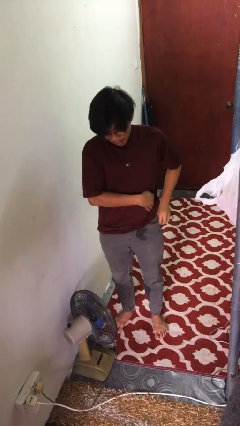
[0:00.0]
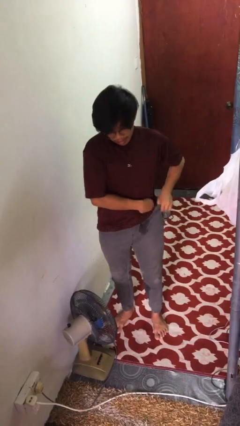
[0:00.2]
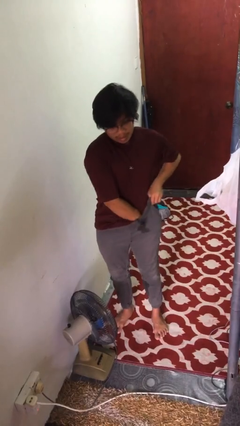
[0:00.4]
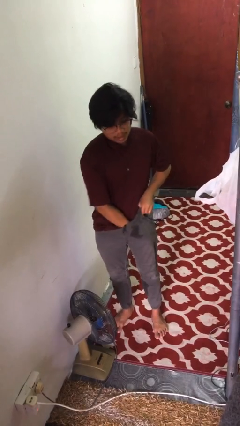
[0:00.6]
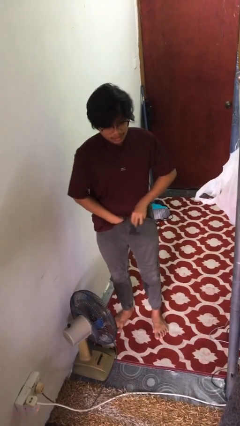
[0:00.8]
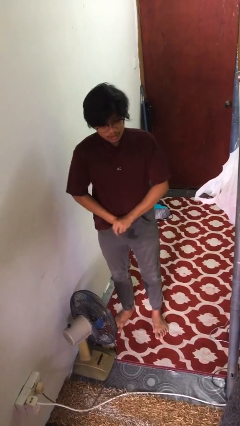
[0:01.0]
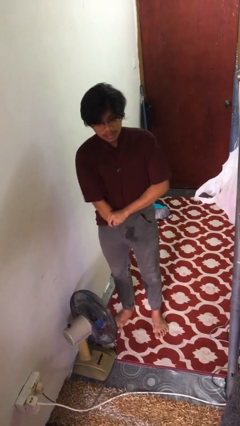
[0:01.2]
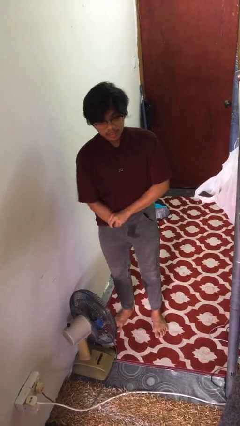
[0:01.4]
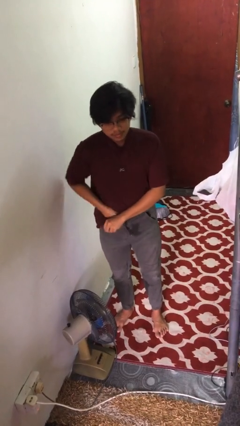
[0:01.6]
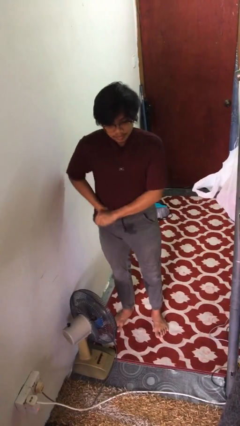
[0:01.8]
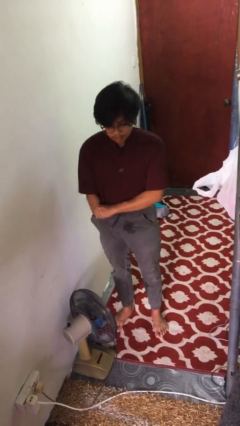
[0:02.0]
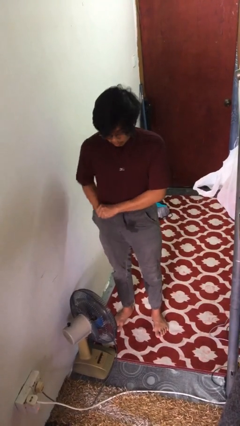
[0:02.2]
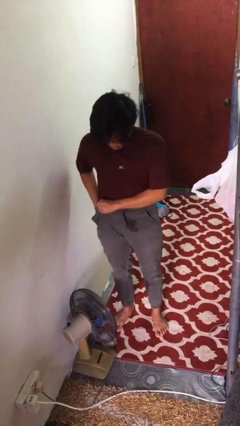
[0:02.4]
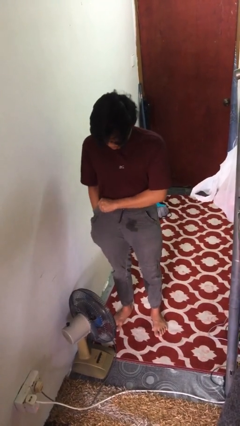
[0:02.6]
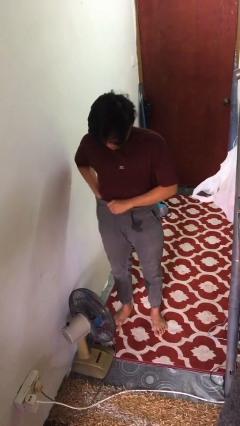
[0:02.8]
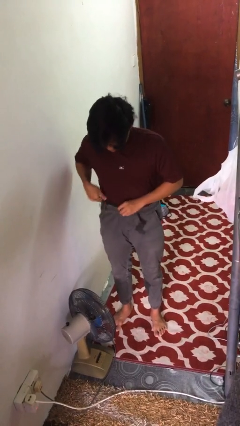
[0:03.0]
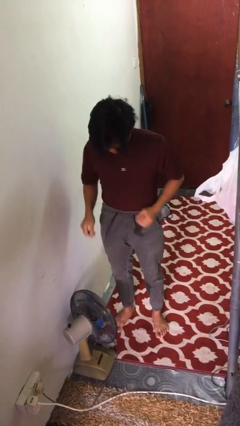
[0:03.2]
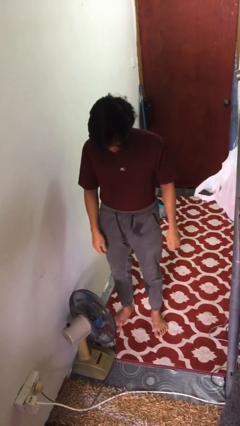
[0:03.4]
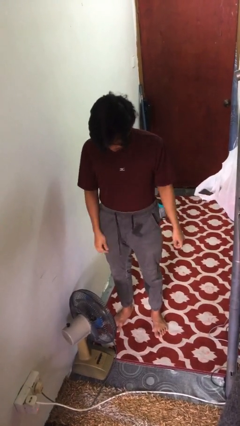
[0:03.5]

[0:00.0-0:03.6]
person tucks in shirt

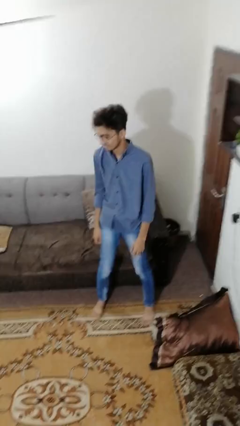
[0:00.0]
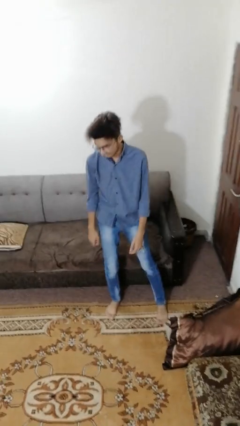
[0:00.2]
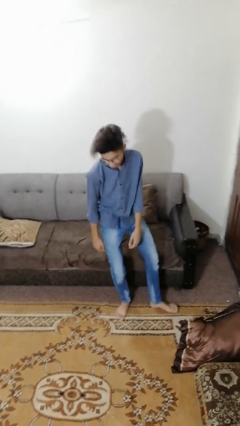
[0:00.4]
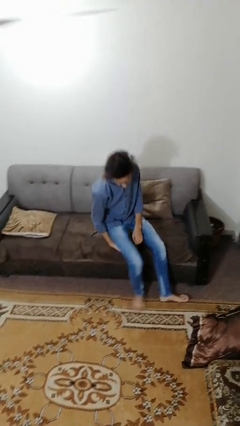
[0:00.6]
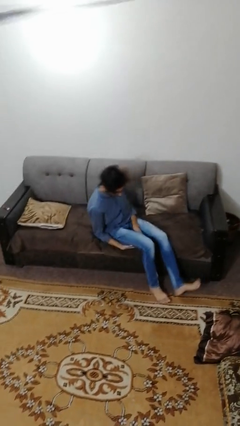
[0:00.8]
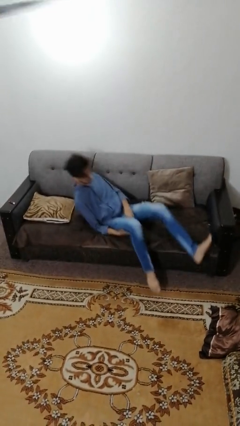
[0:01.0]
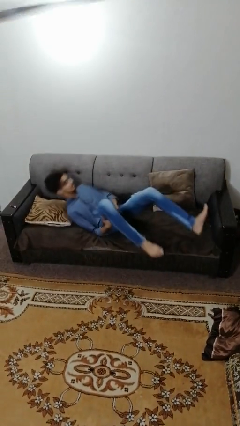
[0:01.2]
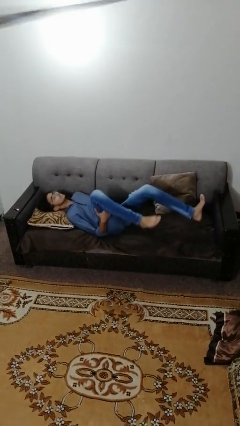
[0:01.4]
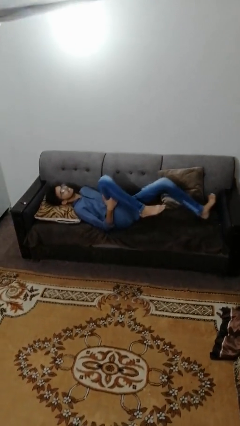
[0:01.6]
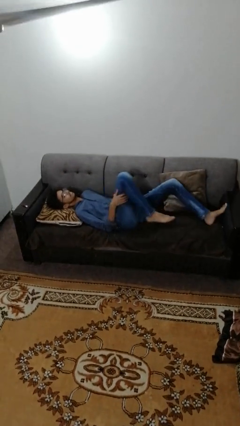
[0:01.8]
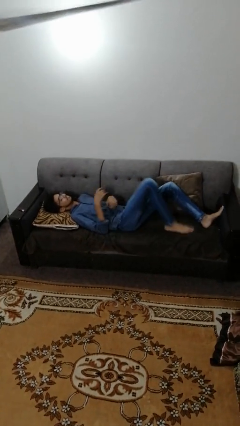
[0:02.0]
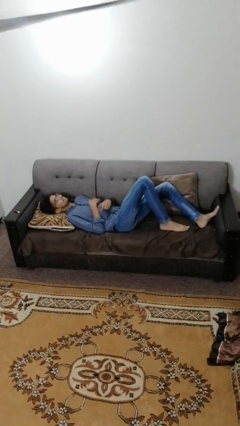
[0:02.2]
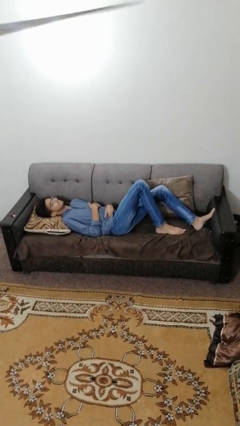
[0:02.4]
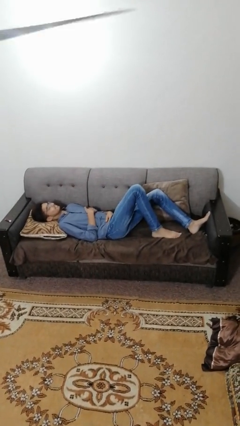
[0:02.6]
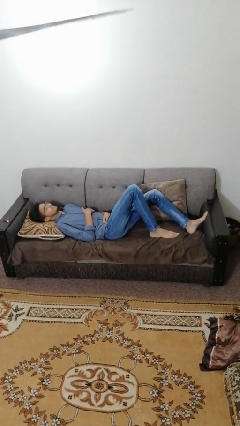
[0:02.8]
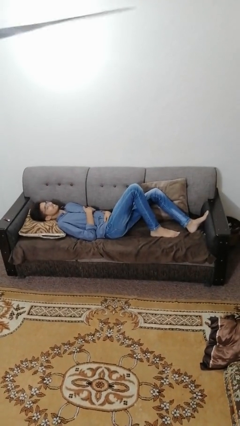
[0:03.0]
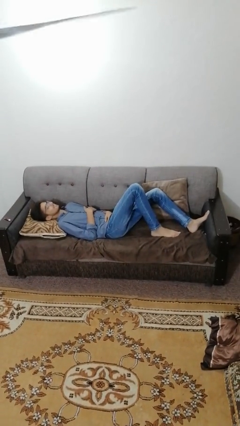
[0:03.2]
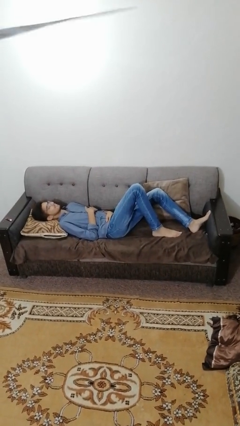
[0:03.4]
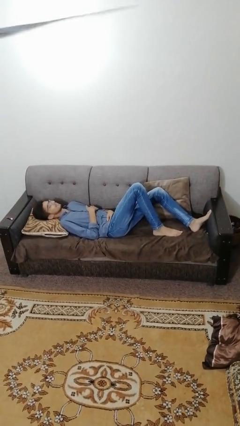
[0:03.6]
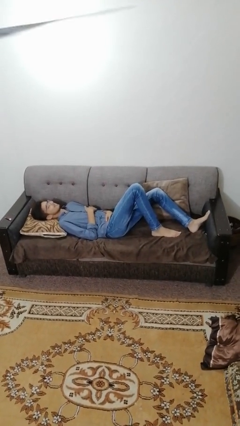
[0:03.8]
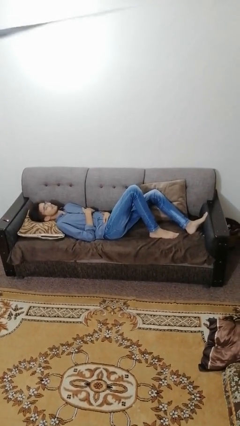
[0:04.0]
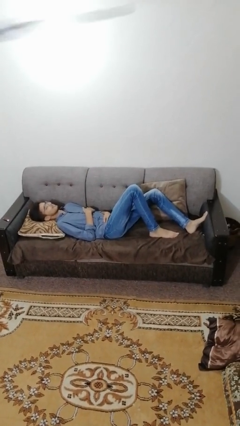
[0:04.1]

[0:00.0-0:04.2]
person lies down on couch

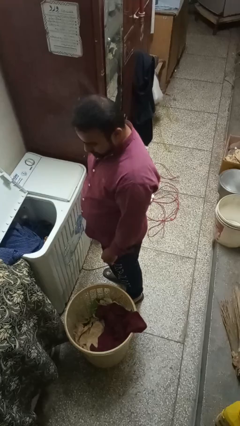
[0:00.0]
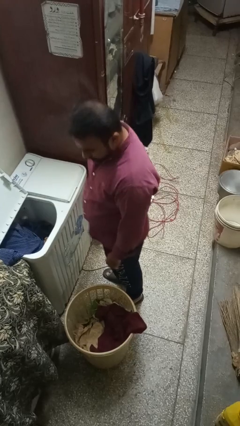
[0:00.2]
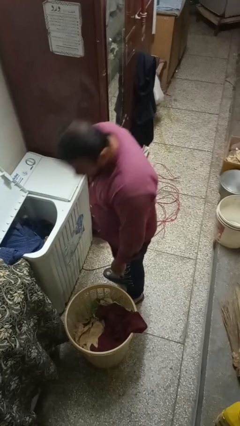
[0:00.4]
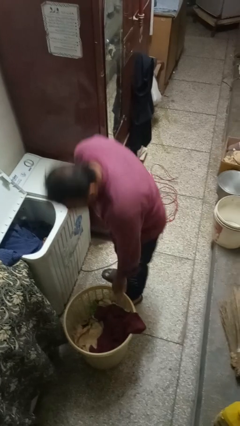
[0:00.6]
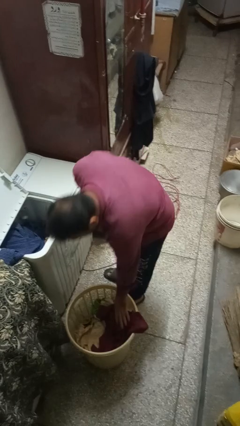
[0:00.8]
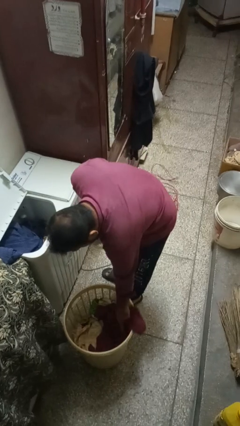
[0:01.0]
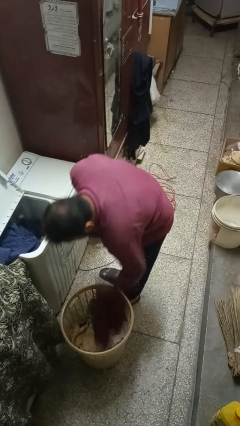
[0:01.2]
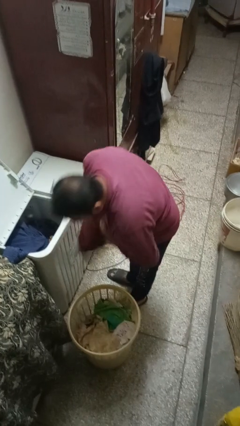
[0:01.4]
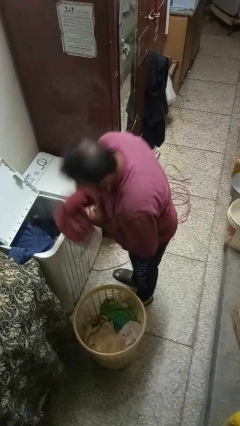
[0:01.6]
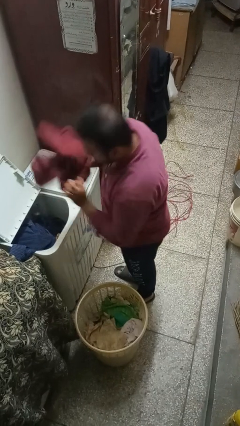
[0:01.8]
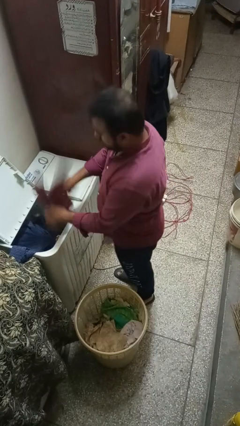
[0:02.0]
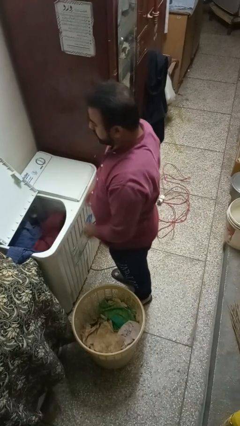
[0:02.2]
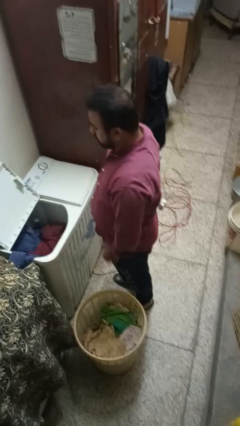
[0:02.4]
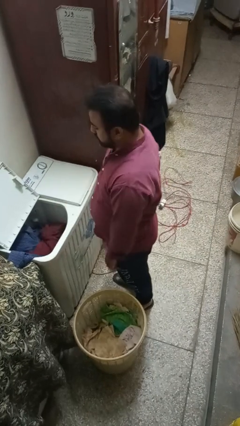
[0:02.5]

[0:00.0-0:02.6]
person loads clotheswasher

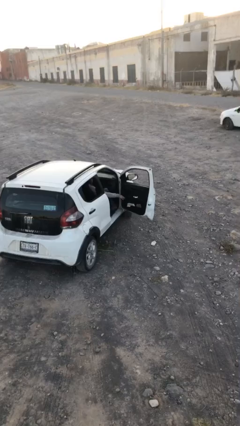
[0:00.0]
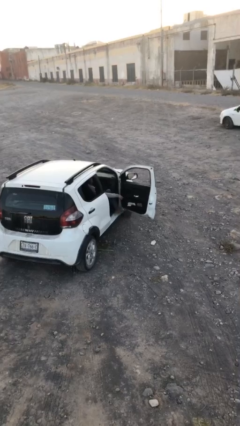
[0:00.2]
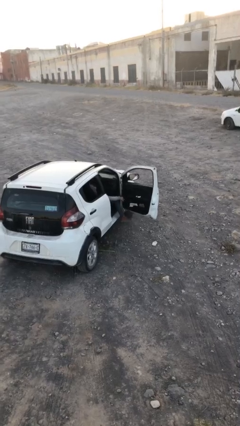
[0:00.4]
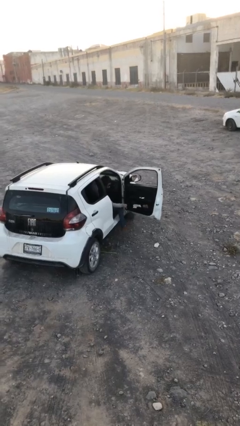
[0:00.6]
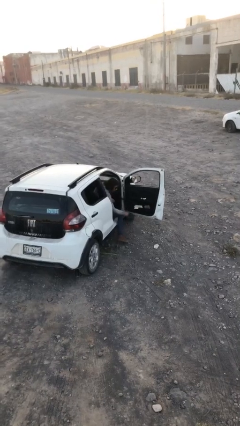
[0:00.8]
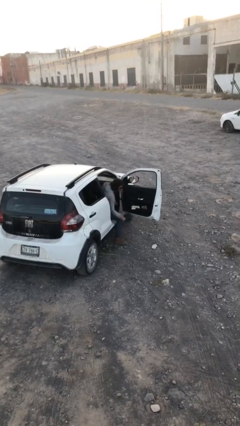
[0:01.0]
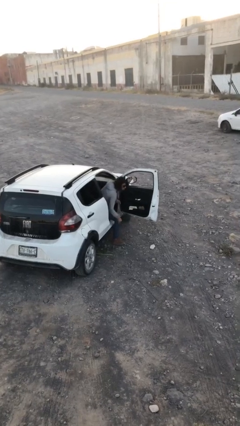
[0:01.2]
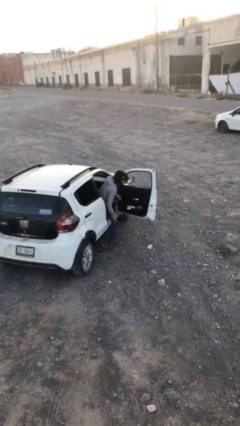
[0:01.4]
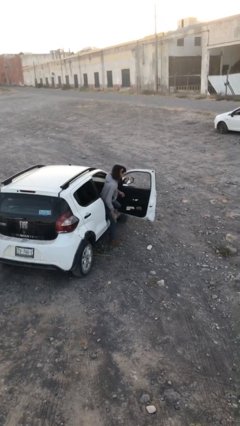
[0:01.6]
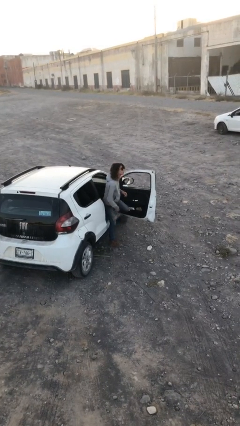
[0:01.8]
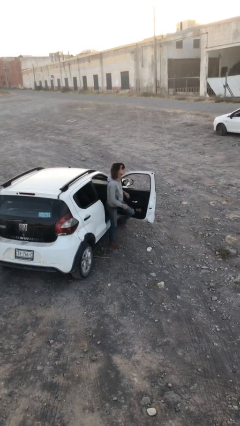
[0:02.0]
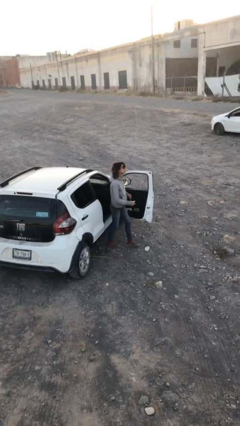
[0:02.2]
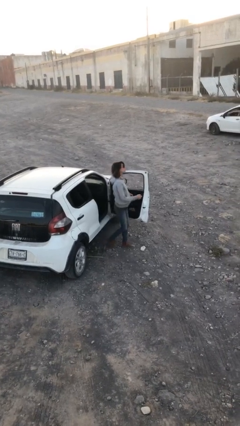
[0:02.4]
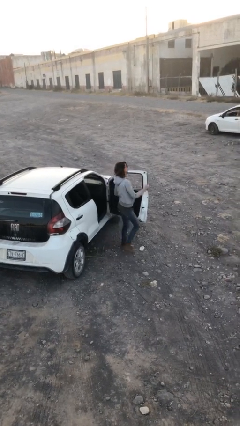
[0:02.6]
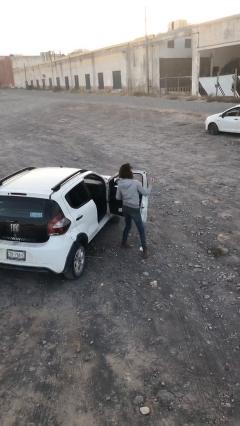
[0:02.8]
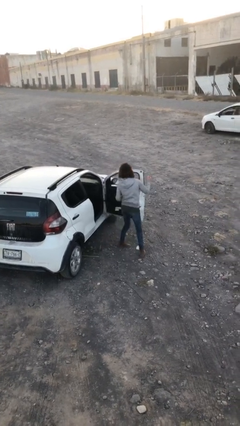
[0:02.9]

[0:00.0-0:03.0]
person exits car

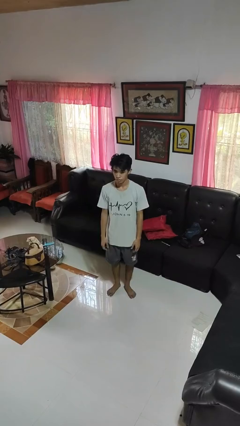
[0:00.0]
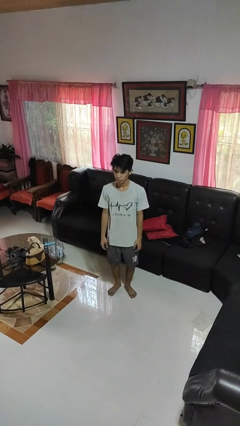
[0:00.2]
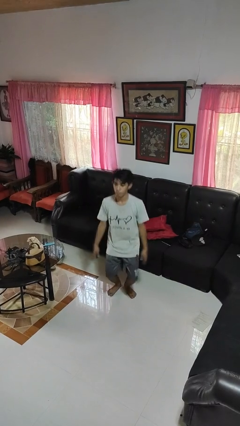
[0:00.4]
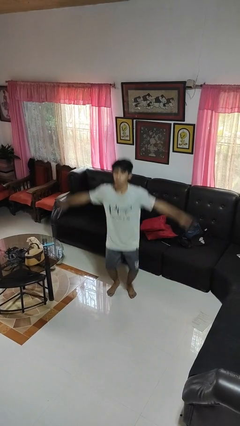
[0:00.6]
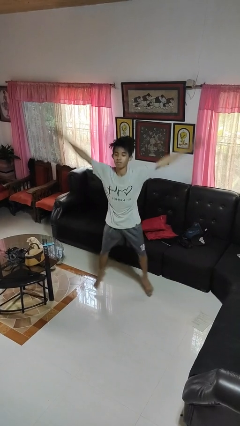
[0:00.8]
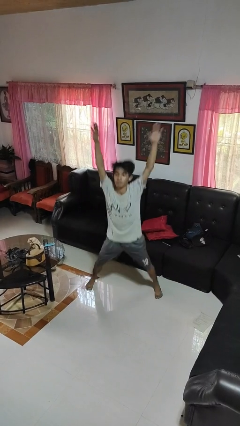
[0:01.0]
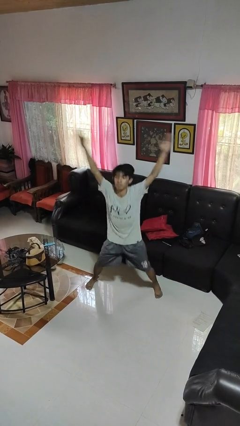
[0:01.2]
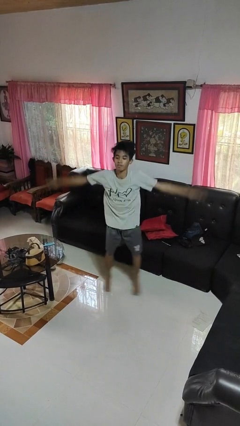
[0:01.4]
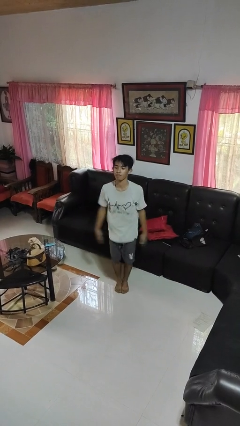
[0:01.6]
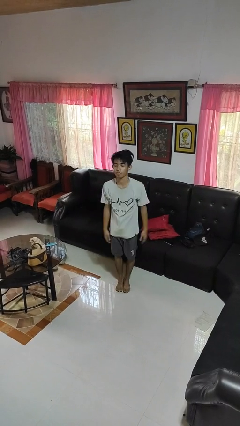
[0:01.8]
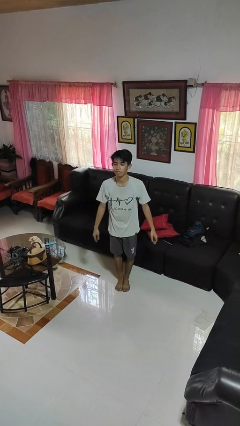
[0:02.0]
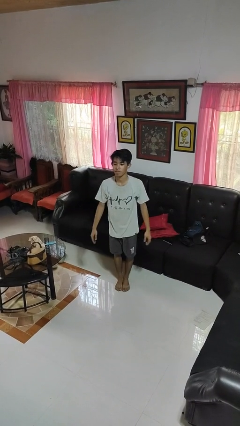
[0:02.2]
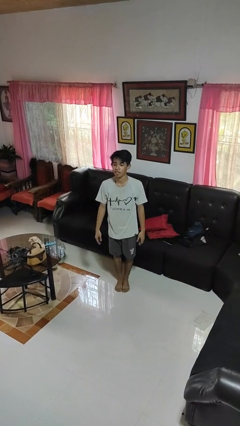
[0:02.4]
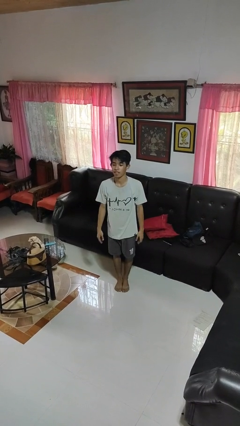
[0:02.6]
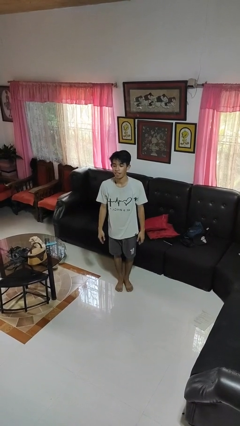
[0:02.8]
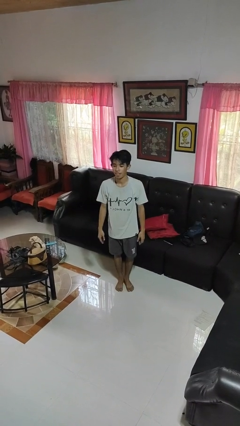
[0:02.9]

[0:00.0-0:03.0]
person exercises with jumping jacks

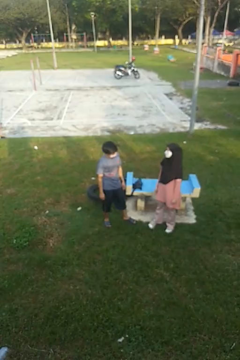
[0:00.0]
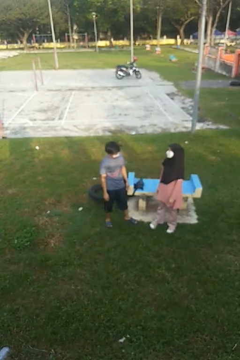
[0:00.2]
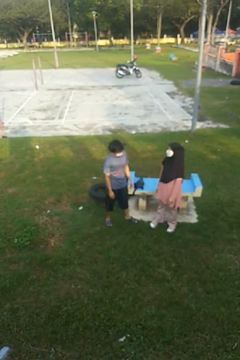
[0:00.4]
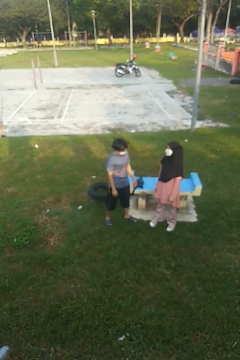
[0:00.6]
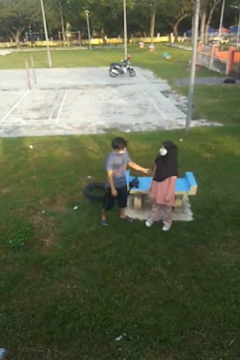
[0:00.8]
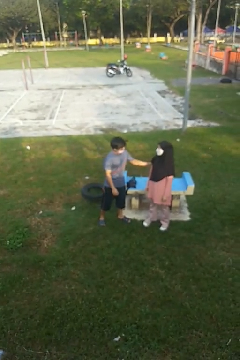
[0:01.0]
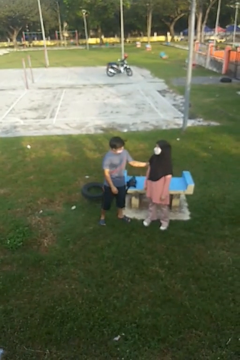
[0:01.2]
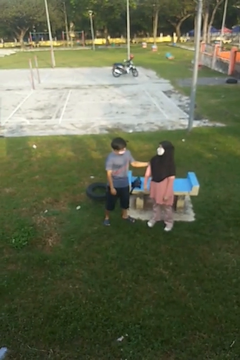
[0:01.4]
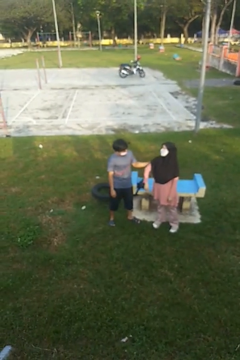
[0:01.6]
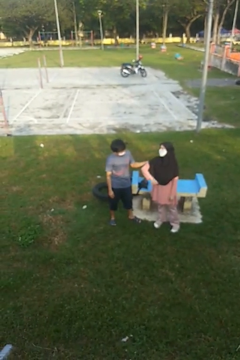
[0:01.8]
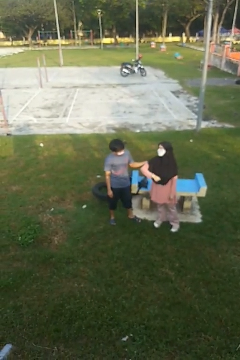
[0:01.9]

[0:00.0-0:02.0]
person grabs person by bicep
